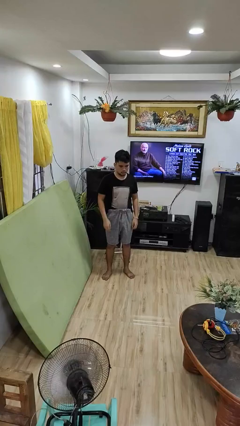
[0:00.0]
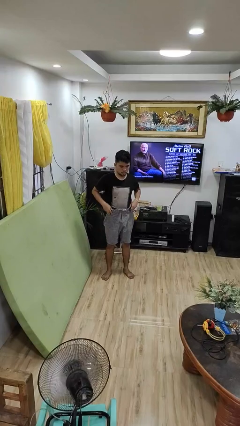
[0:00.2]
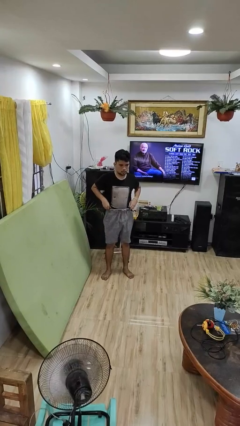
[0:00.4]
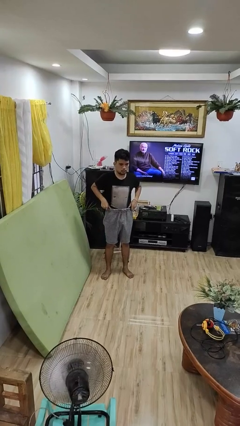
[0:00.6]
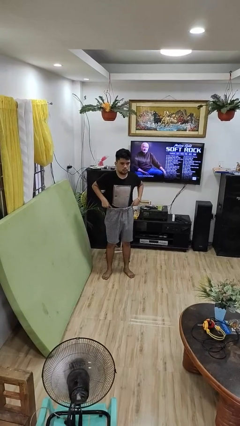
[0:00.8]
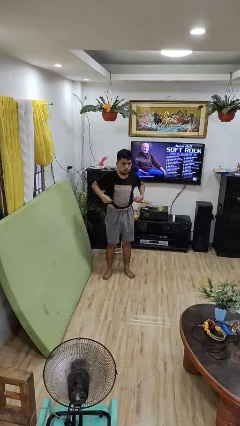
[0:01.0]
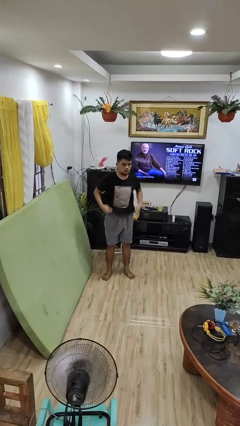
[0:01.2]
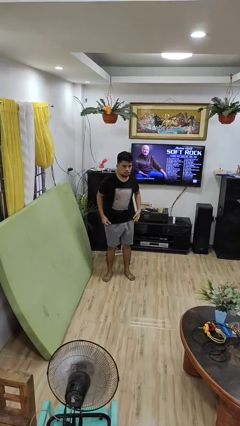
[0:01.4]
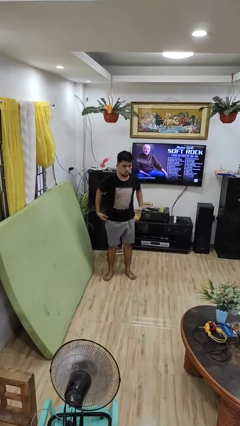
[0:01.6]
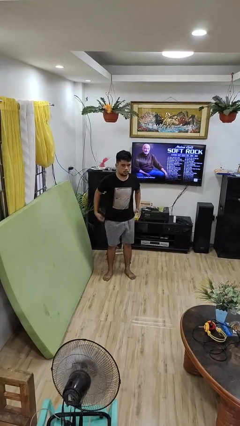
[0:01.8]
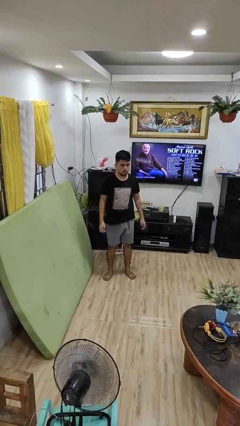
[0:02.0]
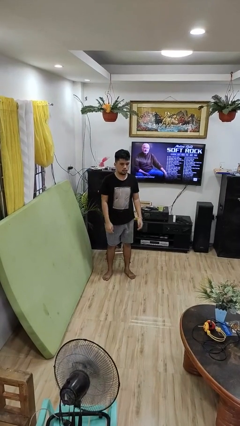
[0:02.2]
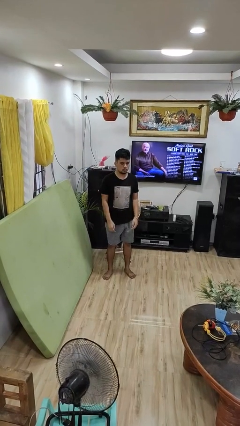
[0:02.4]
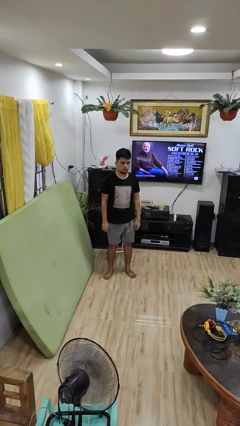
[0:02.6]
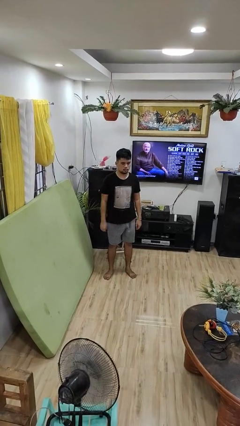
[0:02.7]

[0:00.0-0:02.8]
person untucks shirt

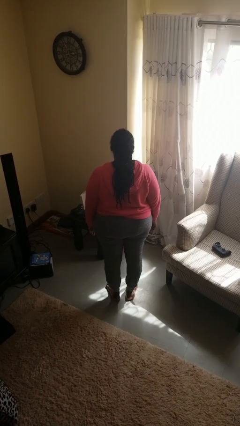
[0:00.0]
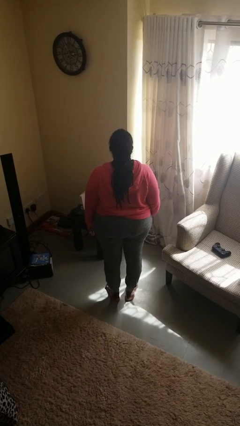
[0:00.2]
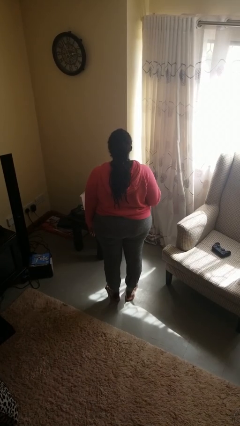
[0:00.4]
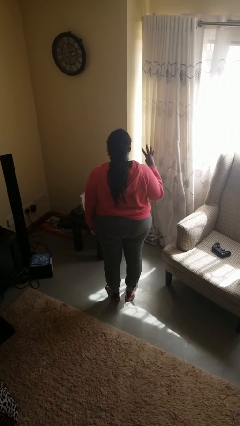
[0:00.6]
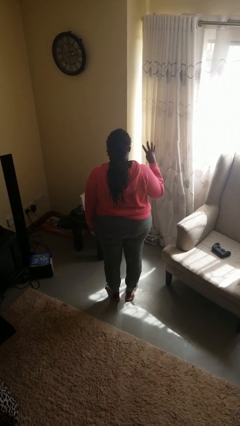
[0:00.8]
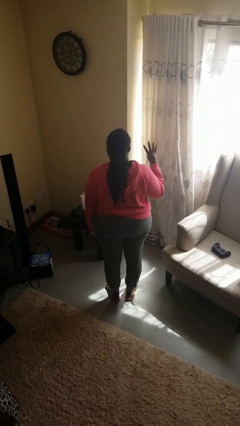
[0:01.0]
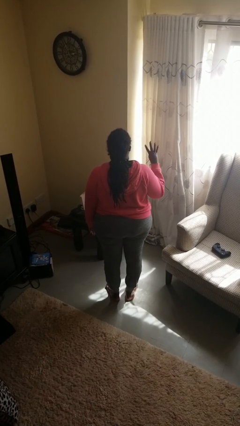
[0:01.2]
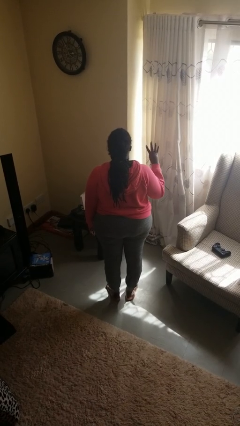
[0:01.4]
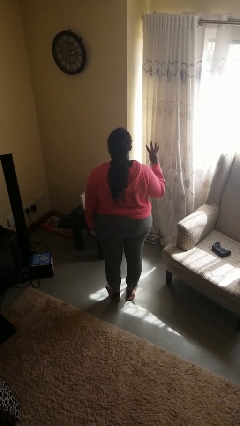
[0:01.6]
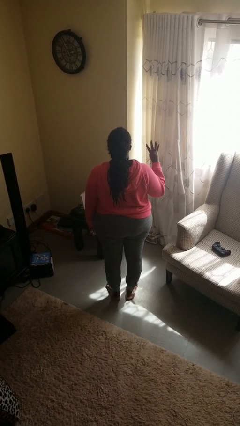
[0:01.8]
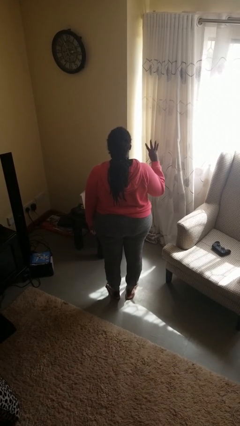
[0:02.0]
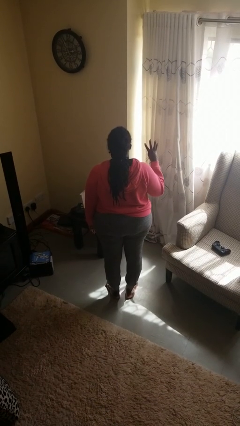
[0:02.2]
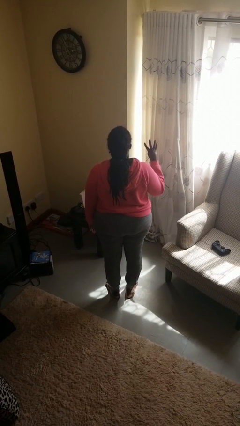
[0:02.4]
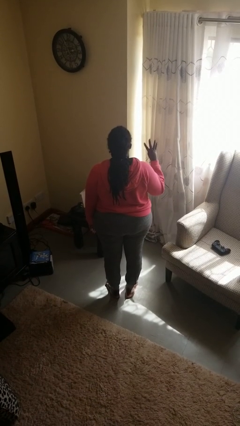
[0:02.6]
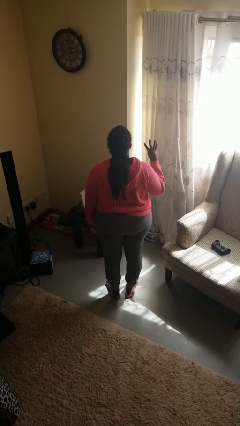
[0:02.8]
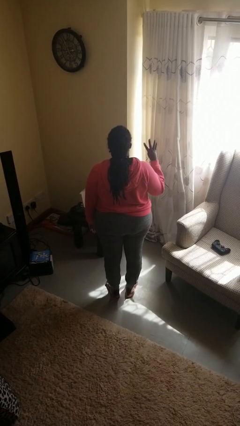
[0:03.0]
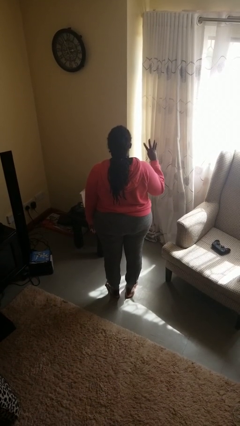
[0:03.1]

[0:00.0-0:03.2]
person gestures number four

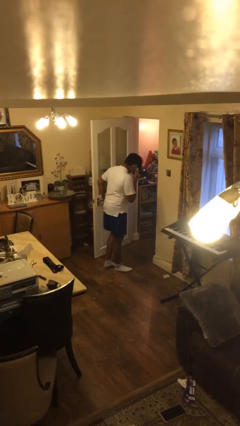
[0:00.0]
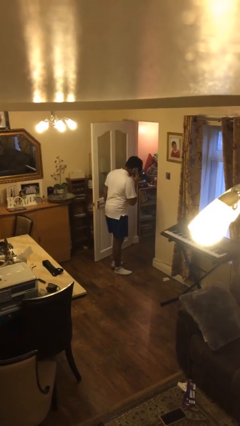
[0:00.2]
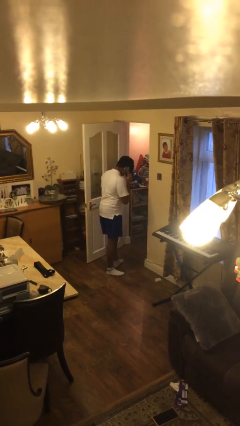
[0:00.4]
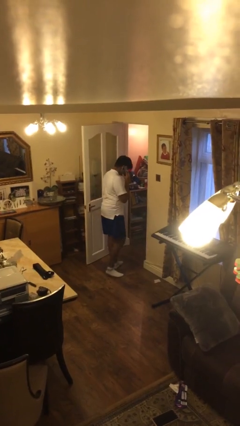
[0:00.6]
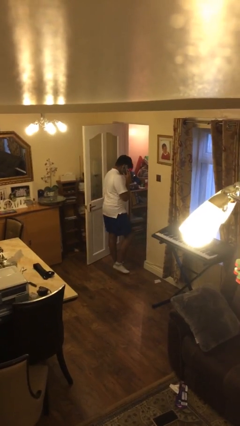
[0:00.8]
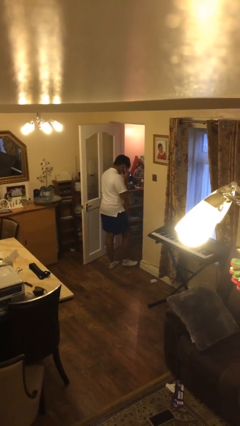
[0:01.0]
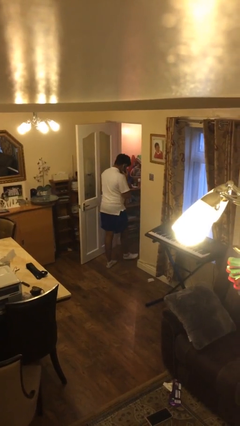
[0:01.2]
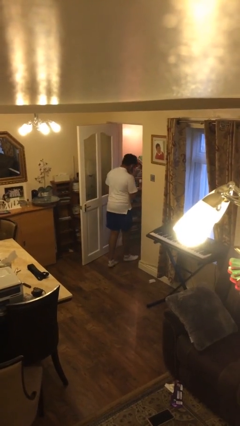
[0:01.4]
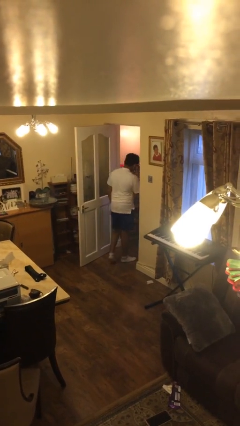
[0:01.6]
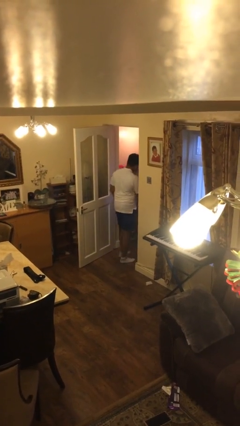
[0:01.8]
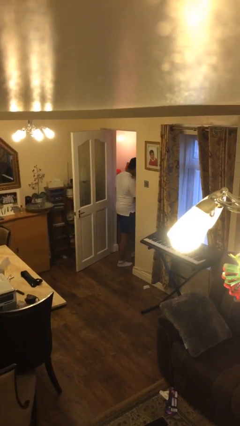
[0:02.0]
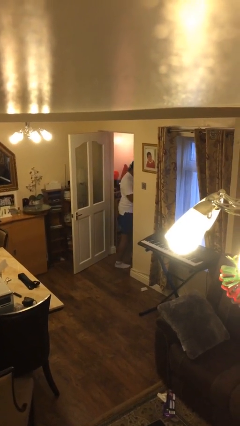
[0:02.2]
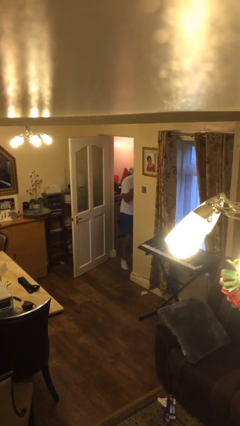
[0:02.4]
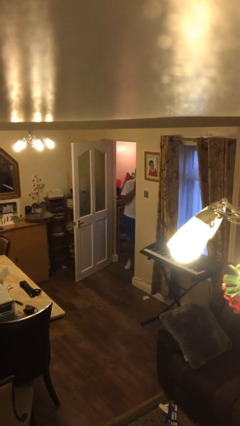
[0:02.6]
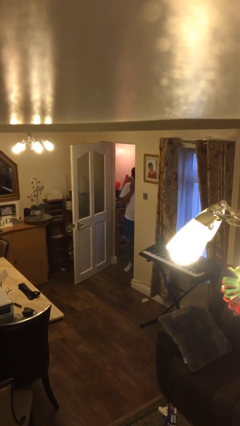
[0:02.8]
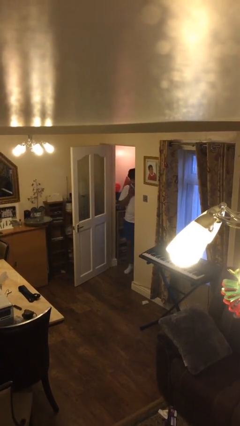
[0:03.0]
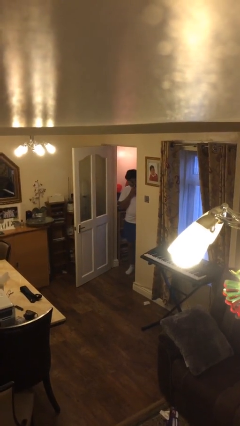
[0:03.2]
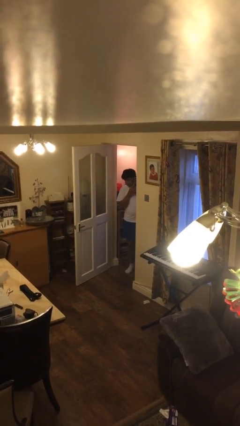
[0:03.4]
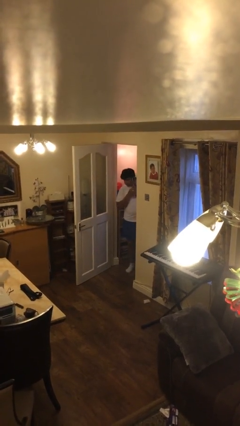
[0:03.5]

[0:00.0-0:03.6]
person exits scene through structure

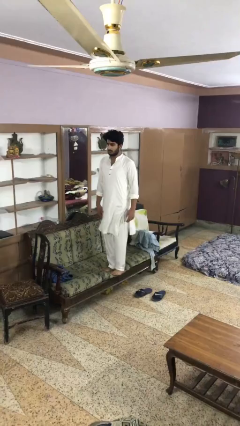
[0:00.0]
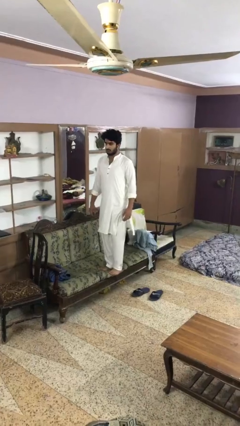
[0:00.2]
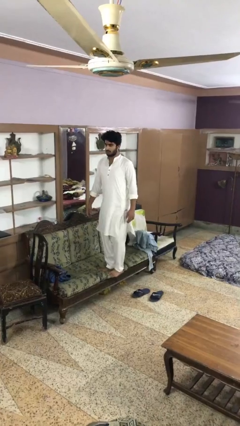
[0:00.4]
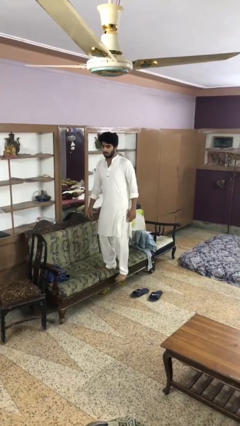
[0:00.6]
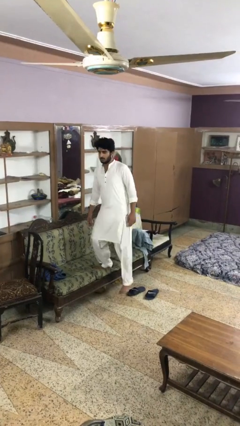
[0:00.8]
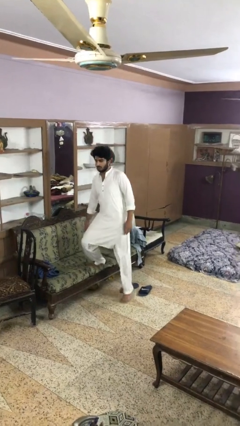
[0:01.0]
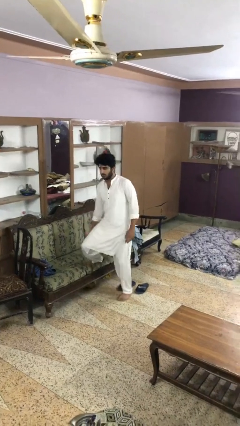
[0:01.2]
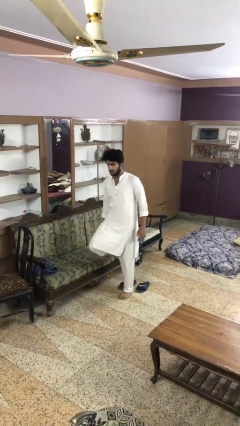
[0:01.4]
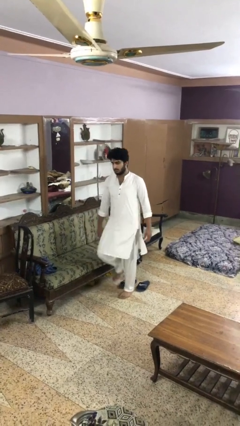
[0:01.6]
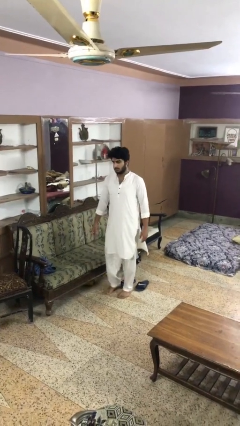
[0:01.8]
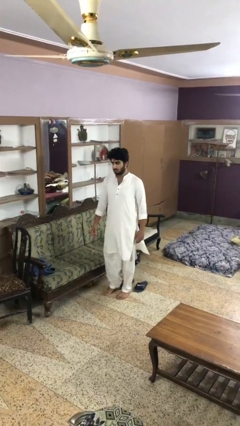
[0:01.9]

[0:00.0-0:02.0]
person climbs off couch

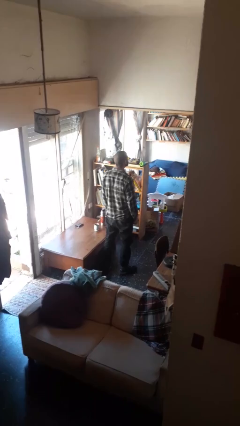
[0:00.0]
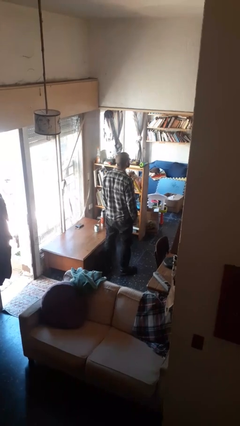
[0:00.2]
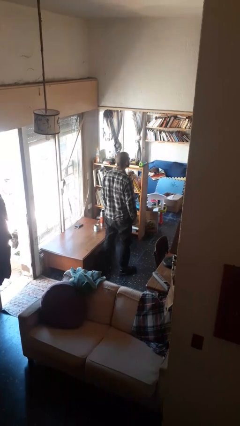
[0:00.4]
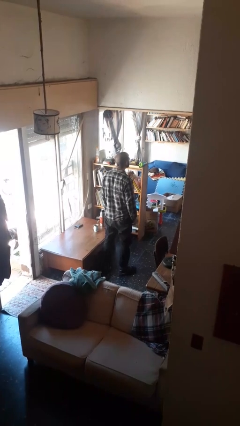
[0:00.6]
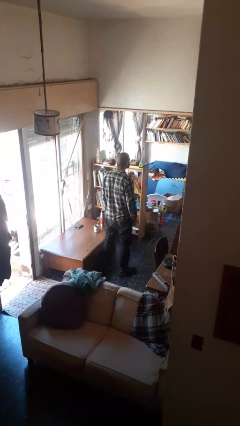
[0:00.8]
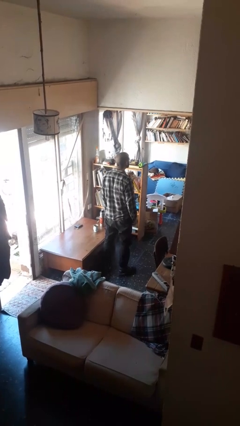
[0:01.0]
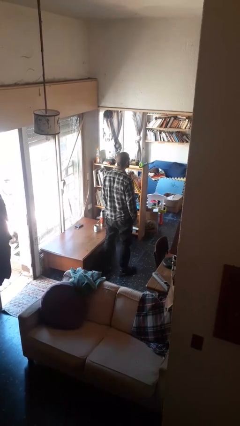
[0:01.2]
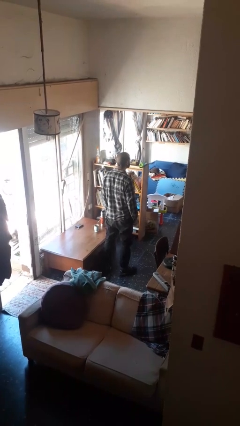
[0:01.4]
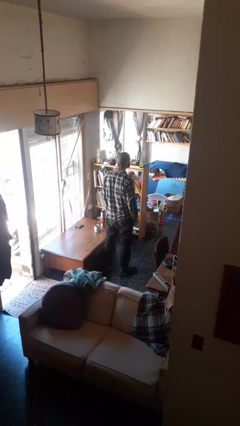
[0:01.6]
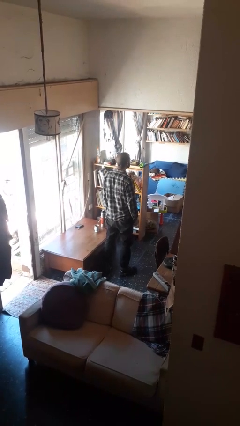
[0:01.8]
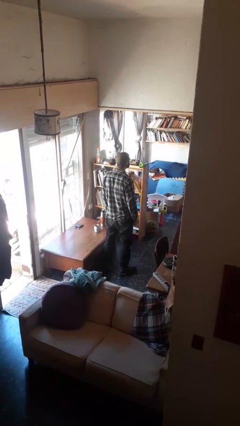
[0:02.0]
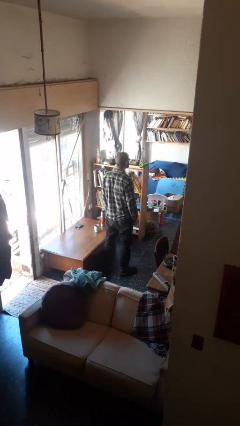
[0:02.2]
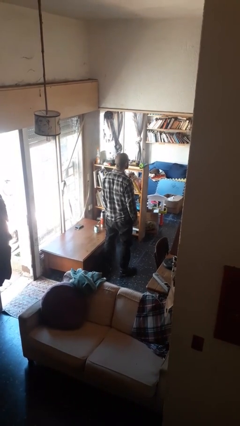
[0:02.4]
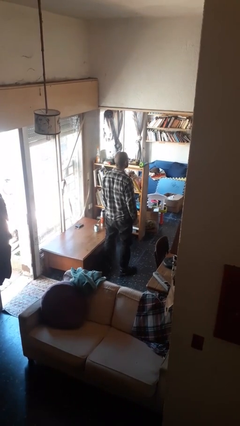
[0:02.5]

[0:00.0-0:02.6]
person sticks out tongue

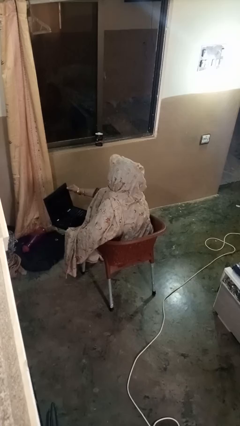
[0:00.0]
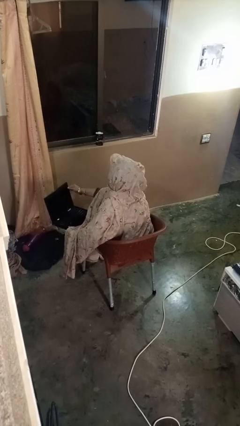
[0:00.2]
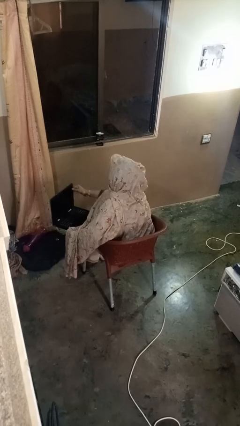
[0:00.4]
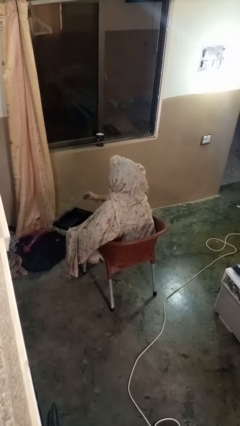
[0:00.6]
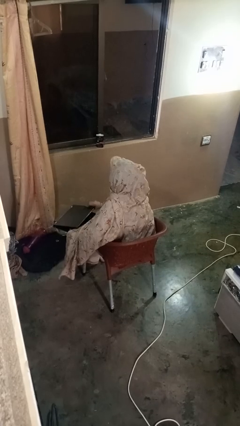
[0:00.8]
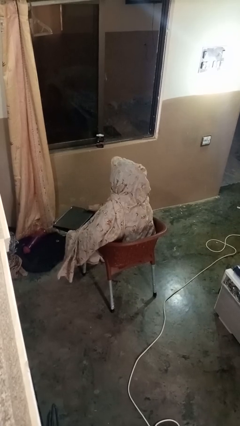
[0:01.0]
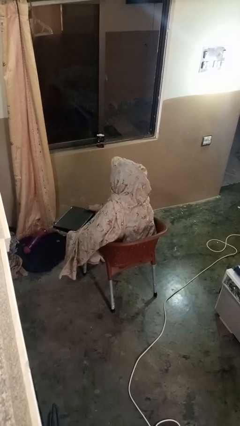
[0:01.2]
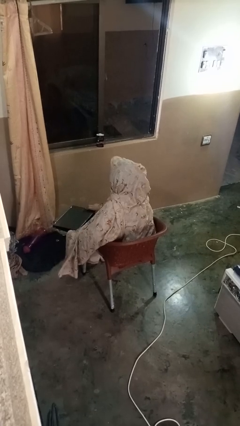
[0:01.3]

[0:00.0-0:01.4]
person closes laptop

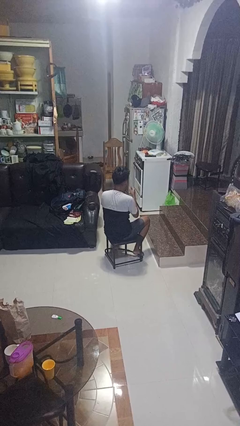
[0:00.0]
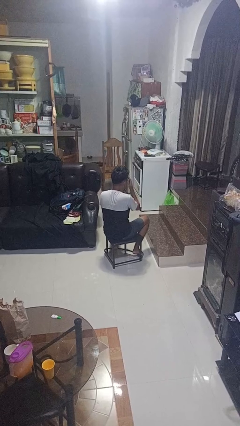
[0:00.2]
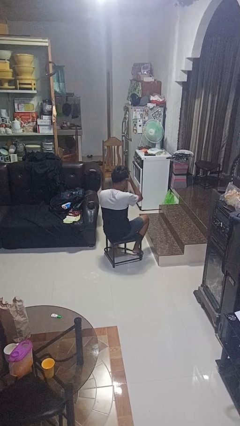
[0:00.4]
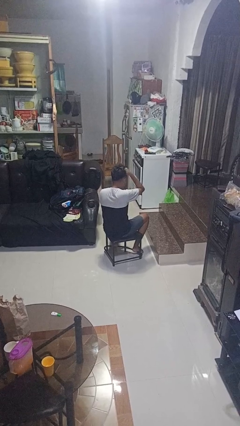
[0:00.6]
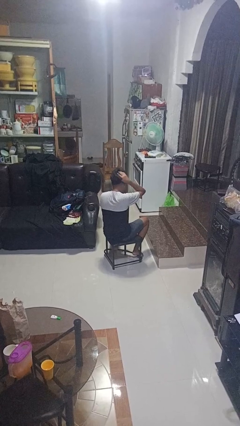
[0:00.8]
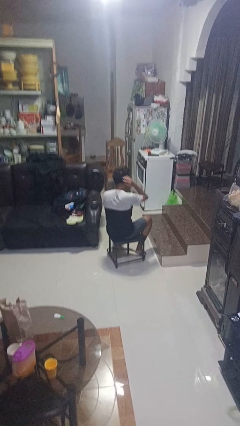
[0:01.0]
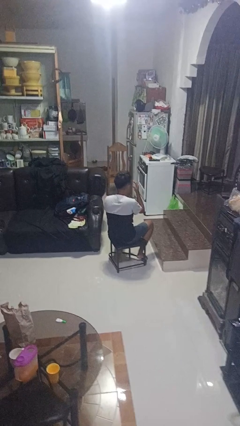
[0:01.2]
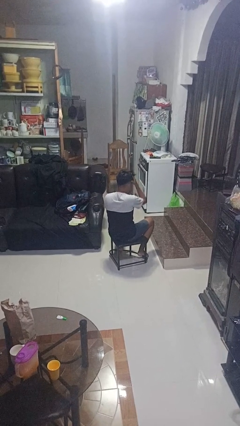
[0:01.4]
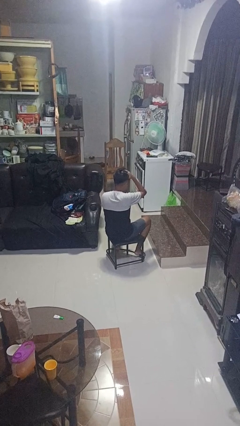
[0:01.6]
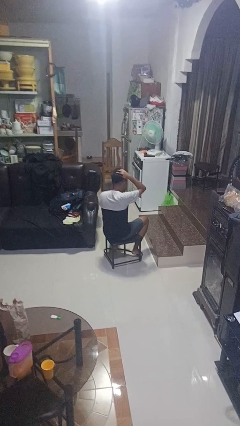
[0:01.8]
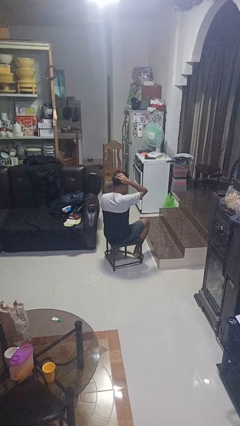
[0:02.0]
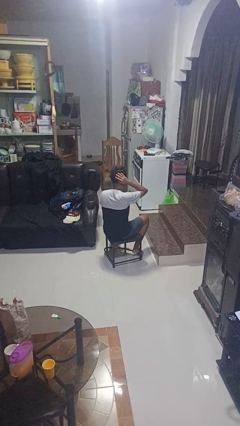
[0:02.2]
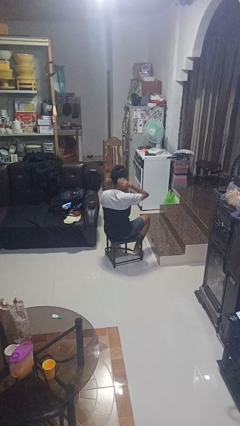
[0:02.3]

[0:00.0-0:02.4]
person strokes hair
